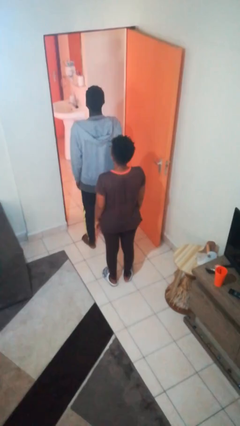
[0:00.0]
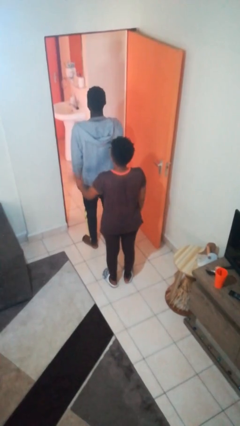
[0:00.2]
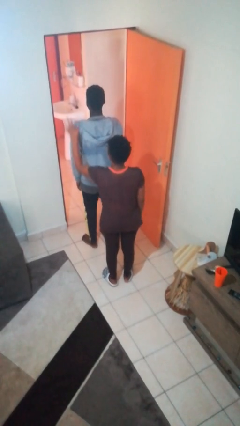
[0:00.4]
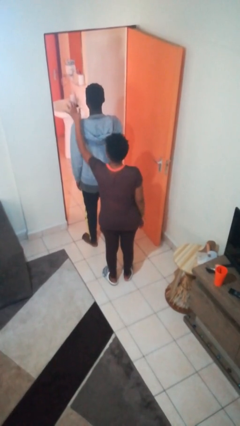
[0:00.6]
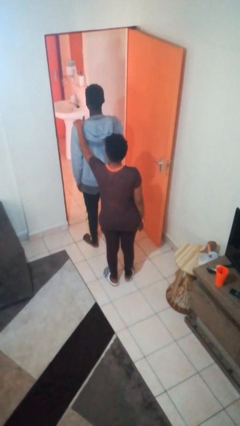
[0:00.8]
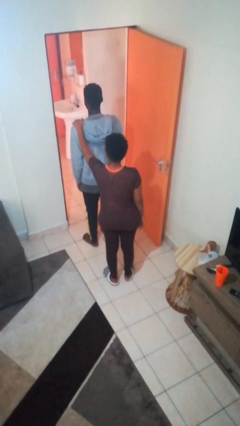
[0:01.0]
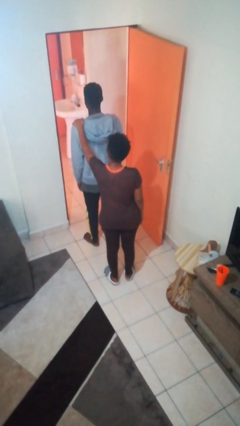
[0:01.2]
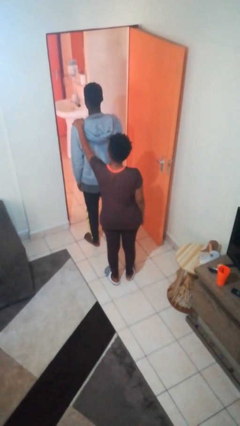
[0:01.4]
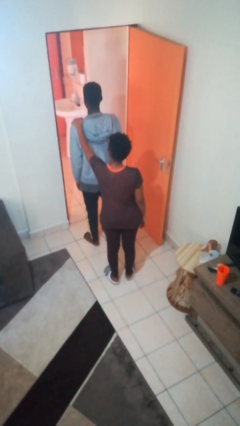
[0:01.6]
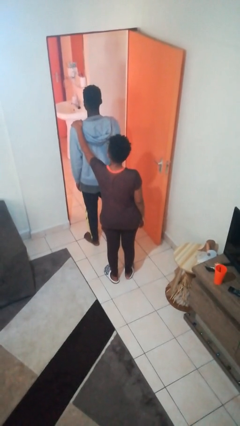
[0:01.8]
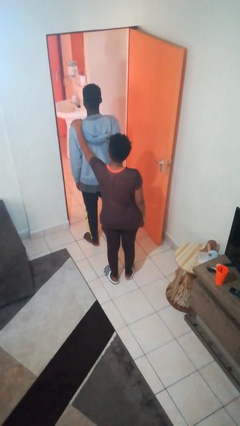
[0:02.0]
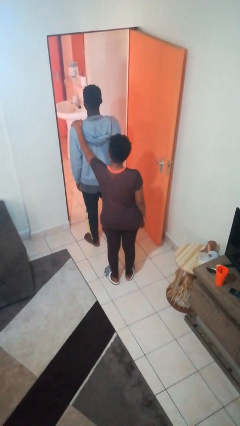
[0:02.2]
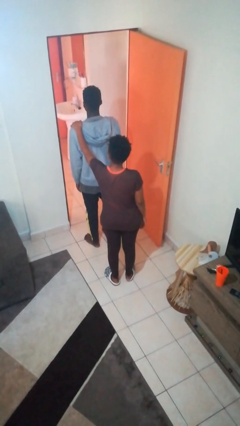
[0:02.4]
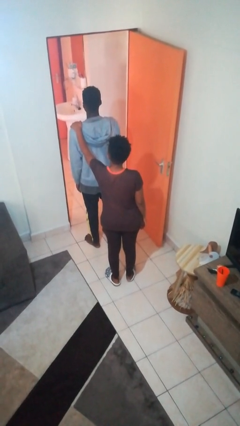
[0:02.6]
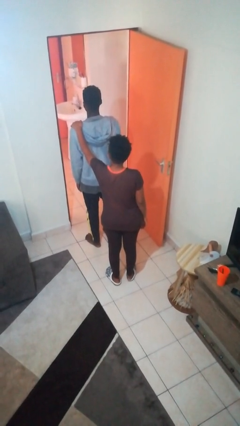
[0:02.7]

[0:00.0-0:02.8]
person grabs person by shoulder

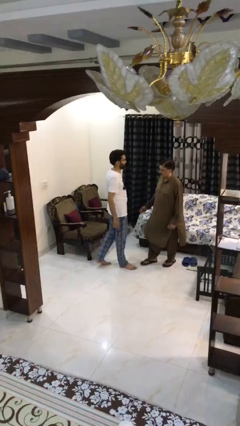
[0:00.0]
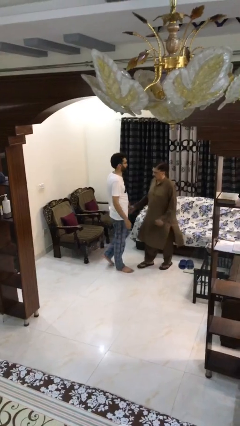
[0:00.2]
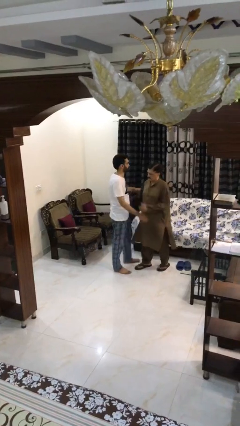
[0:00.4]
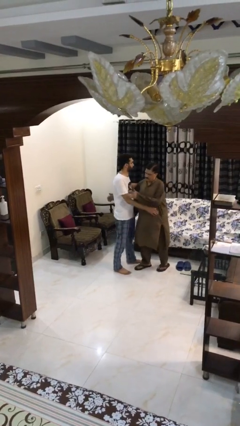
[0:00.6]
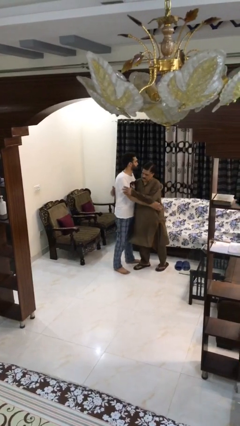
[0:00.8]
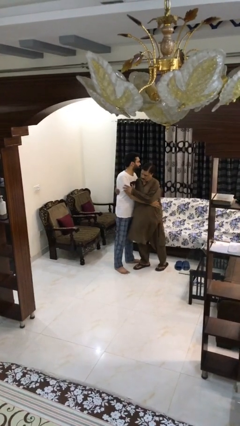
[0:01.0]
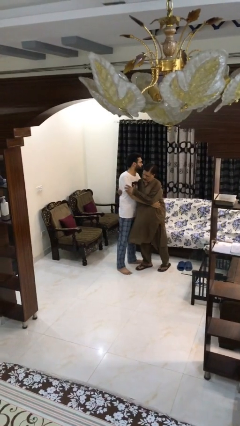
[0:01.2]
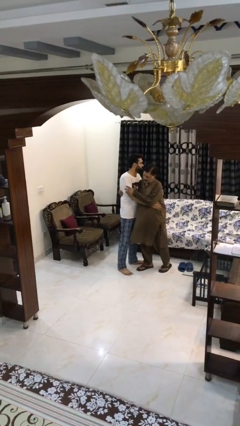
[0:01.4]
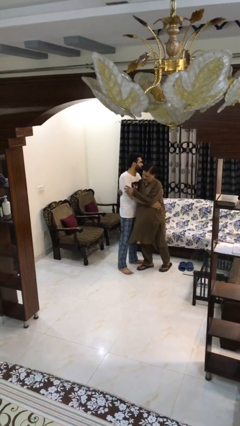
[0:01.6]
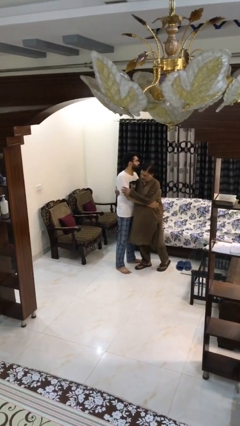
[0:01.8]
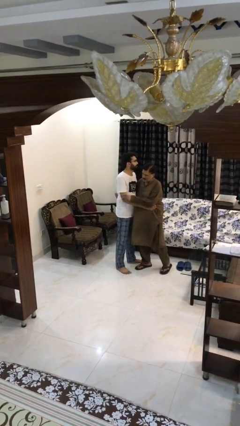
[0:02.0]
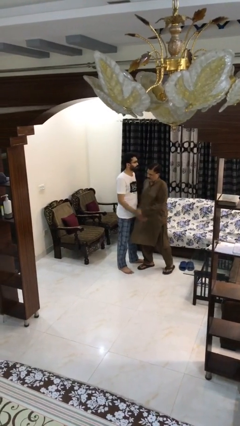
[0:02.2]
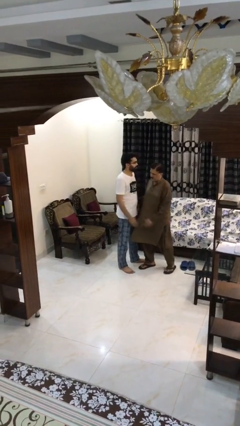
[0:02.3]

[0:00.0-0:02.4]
person embraces person

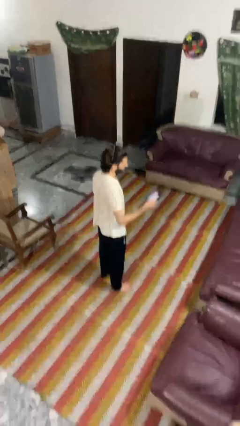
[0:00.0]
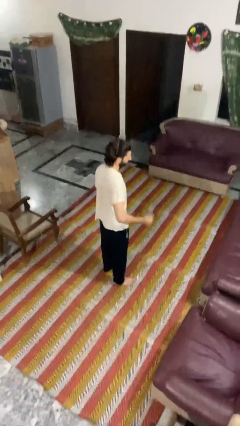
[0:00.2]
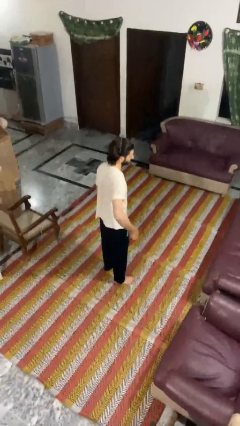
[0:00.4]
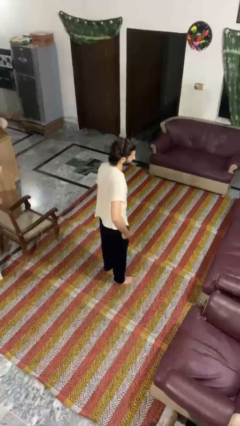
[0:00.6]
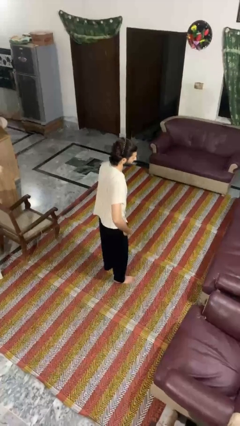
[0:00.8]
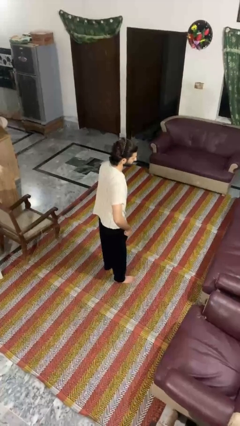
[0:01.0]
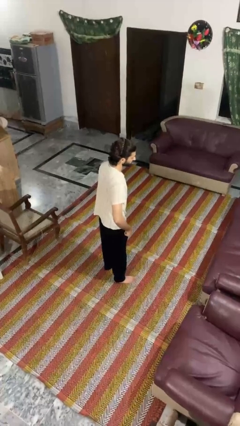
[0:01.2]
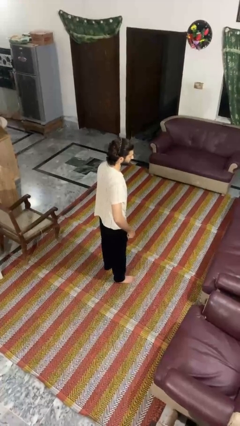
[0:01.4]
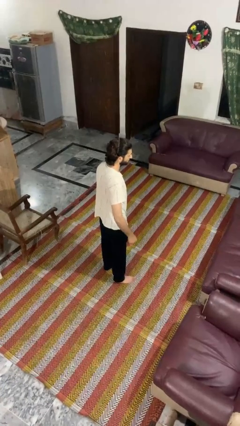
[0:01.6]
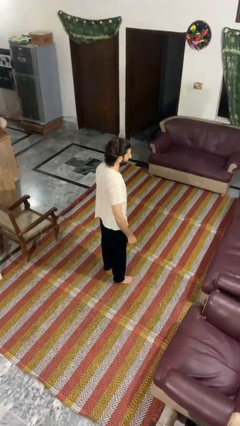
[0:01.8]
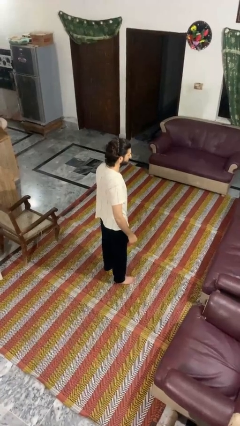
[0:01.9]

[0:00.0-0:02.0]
person puts phone into pocket

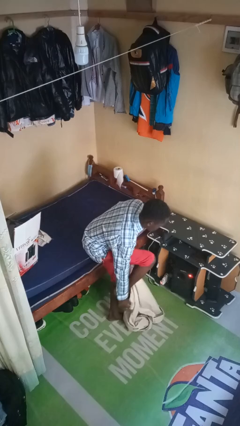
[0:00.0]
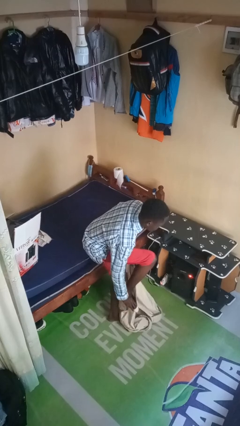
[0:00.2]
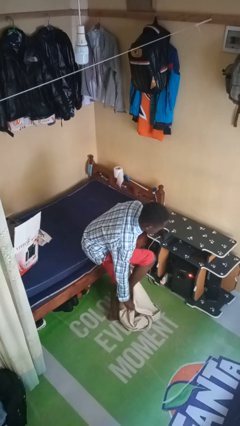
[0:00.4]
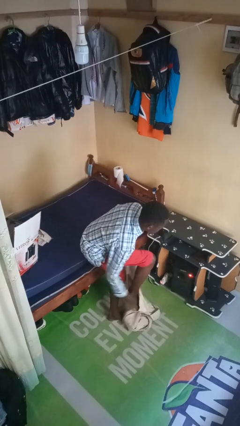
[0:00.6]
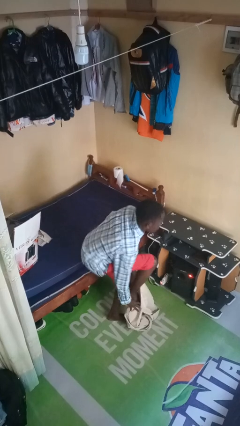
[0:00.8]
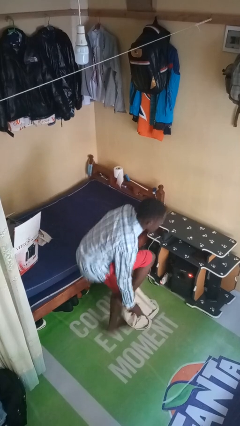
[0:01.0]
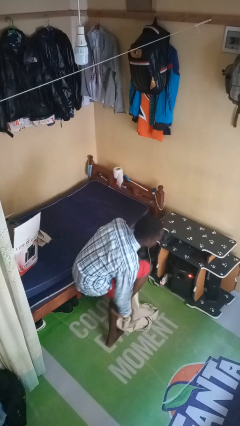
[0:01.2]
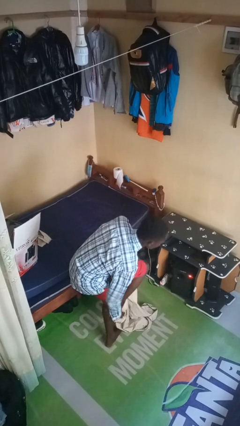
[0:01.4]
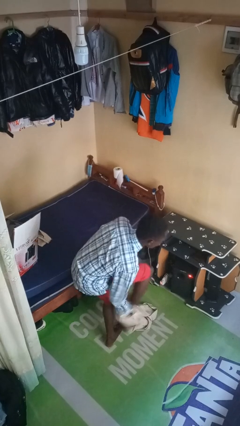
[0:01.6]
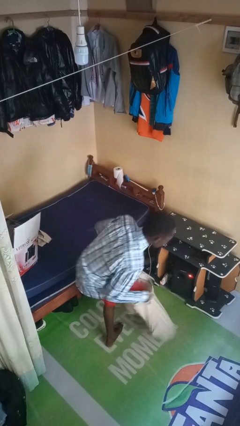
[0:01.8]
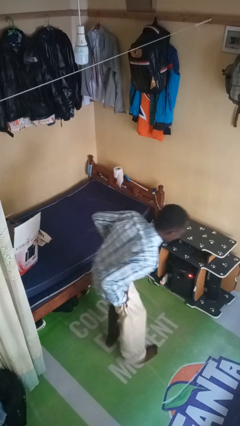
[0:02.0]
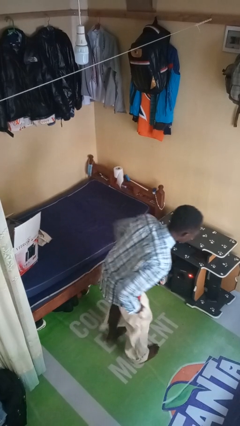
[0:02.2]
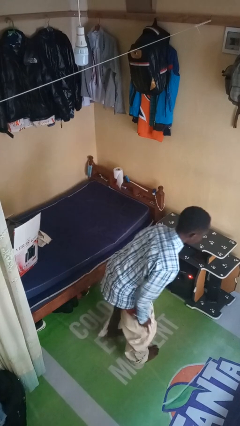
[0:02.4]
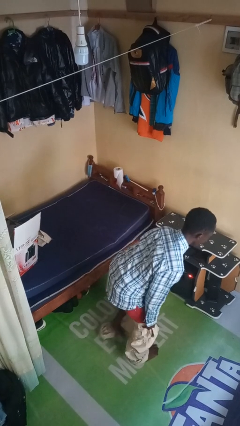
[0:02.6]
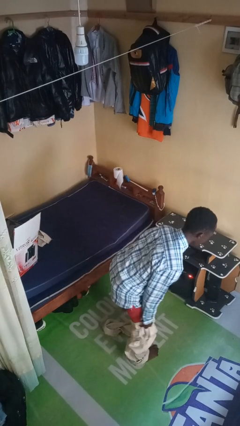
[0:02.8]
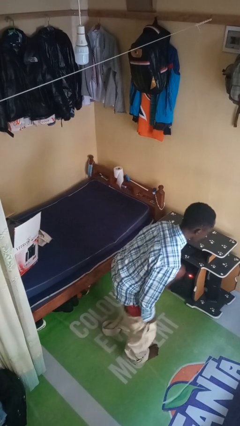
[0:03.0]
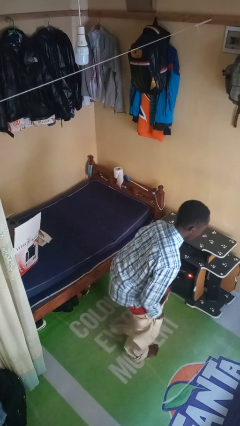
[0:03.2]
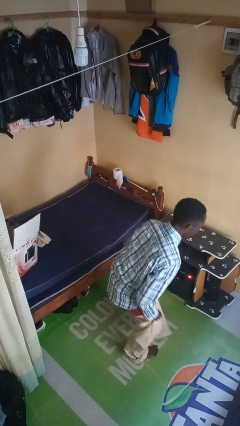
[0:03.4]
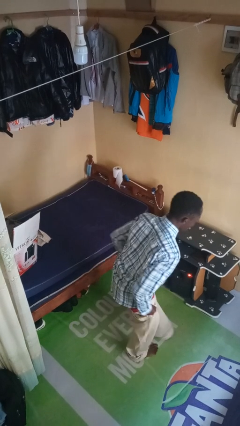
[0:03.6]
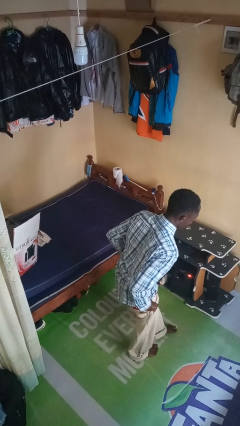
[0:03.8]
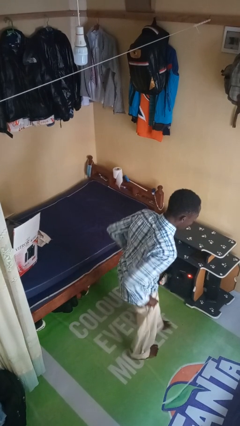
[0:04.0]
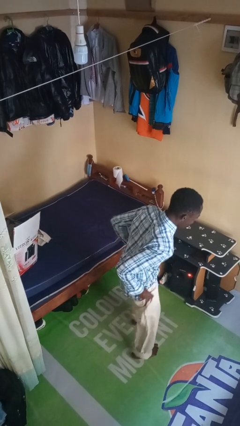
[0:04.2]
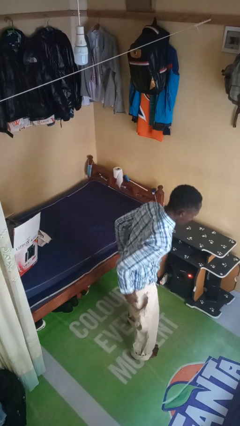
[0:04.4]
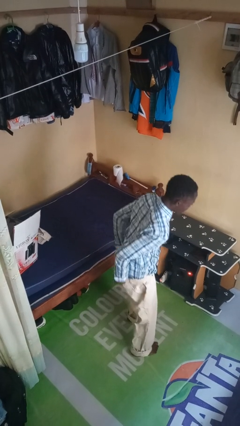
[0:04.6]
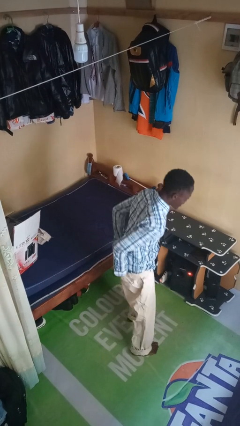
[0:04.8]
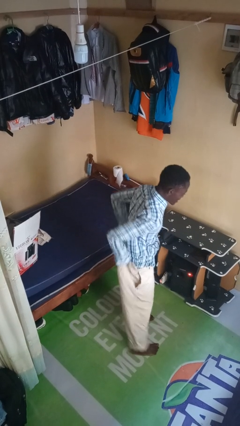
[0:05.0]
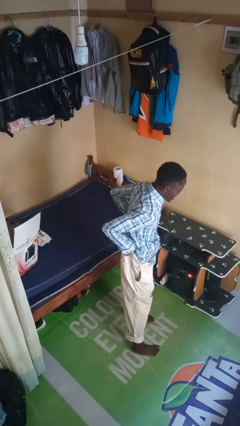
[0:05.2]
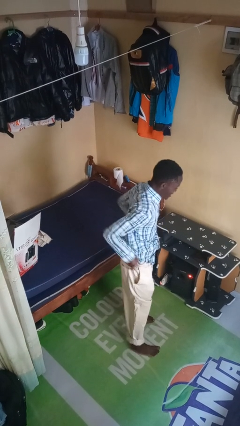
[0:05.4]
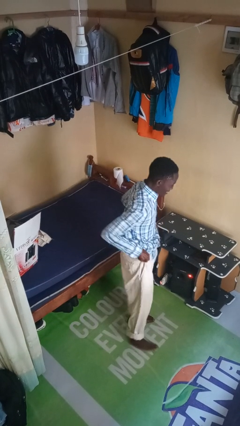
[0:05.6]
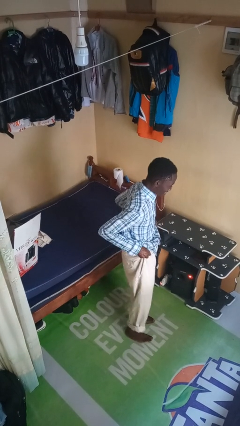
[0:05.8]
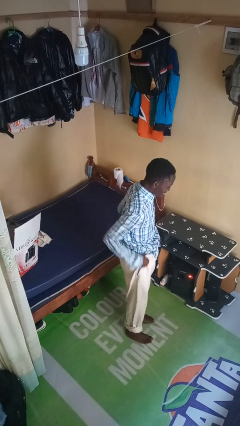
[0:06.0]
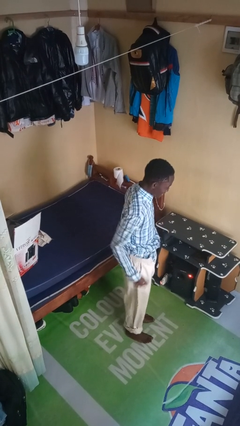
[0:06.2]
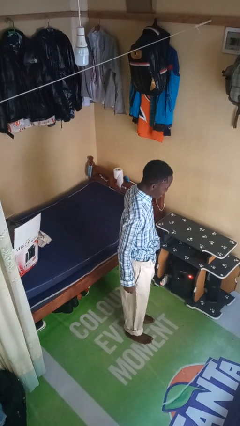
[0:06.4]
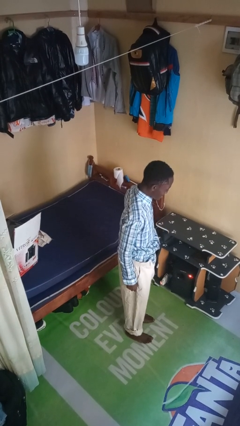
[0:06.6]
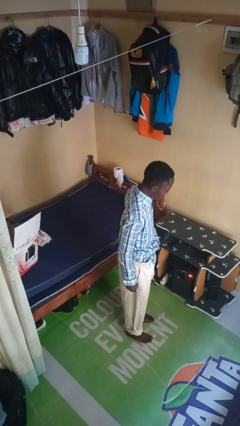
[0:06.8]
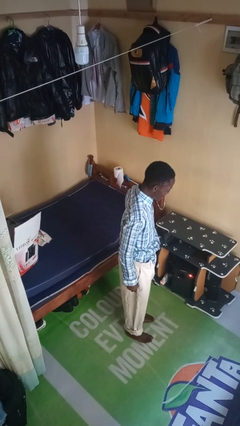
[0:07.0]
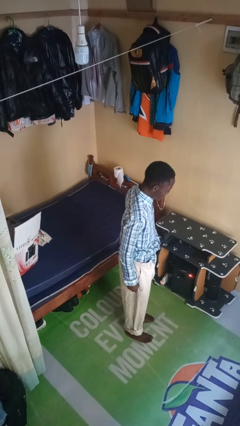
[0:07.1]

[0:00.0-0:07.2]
person puts on pants

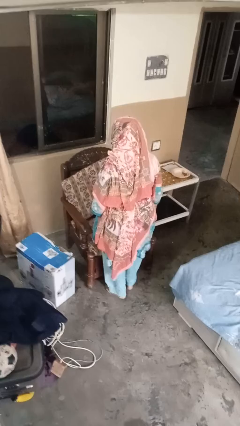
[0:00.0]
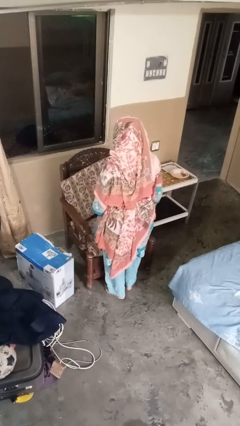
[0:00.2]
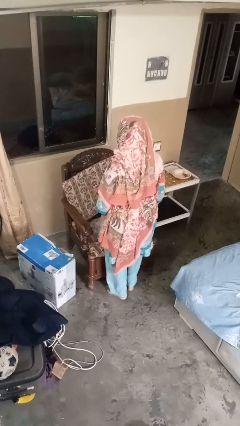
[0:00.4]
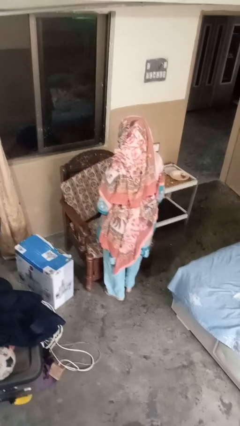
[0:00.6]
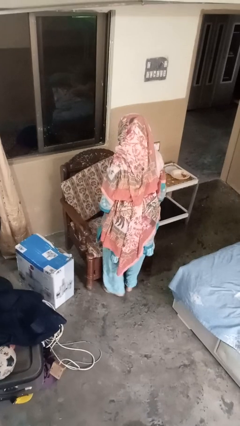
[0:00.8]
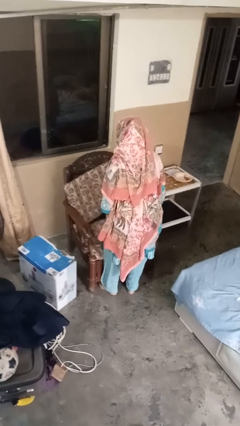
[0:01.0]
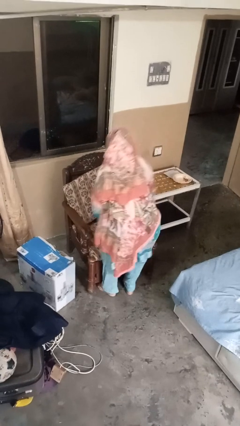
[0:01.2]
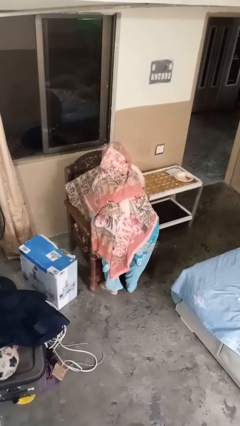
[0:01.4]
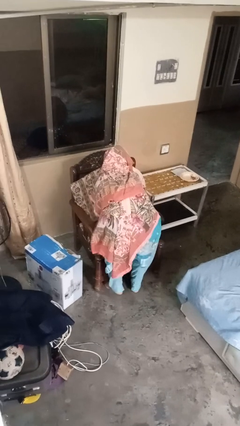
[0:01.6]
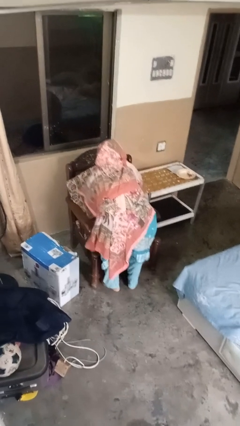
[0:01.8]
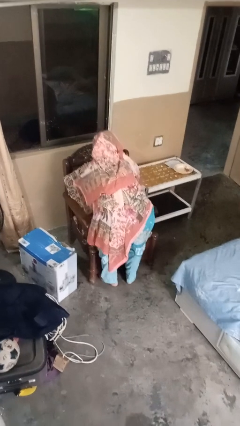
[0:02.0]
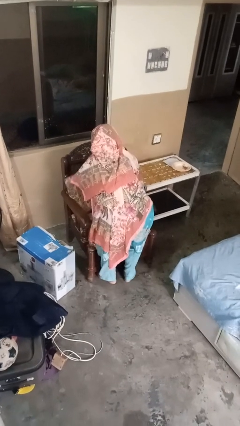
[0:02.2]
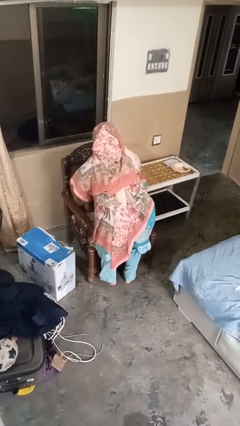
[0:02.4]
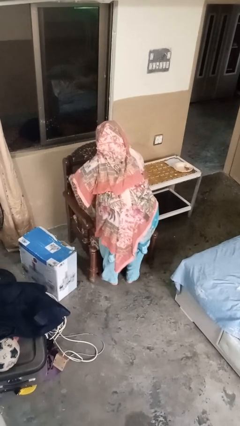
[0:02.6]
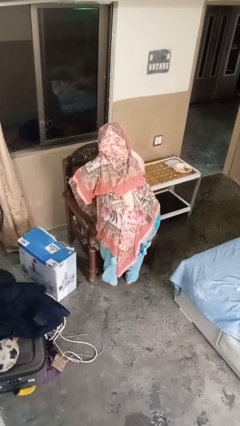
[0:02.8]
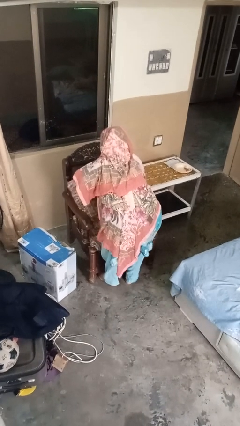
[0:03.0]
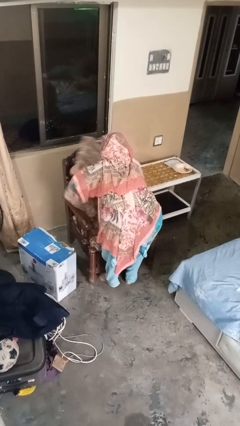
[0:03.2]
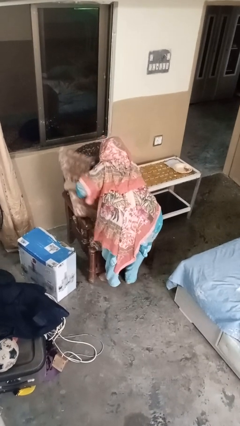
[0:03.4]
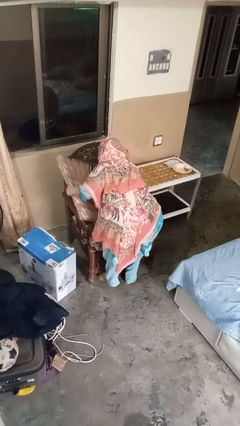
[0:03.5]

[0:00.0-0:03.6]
person searches in couch
